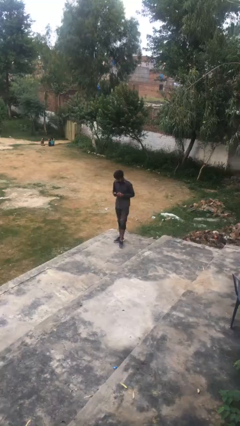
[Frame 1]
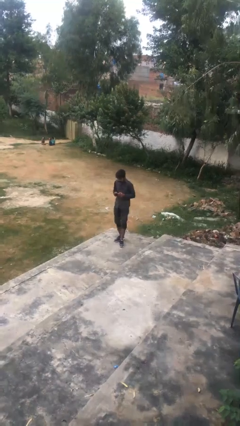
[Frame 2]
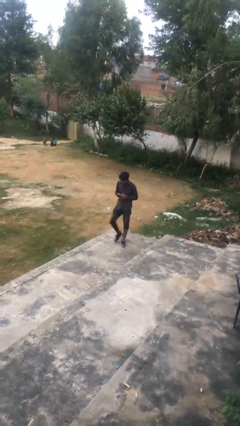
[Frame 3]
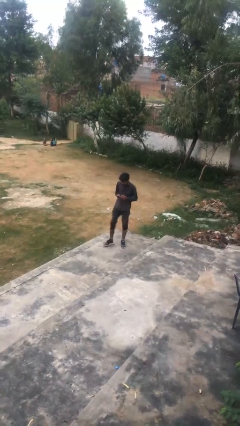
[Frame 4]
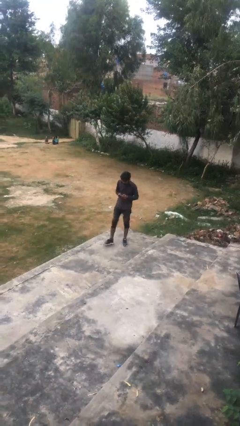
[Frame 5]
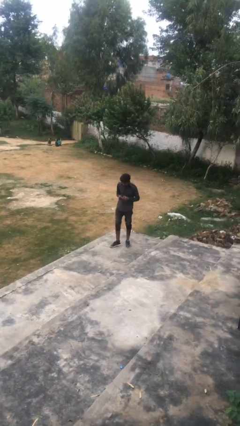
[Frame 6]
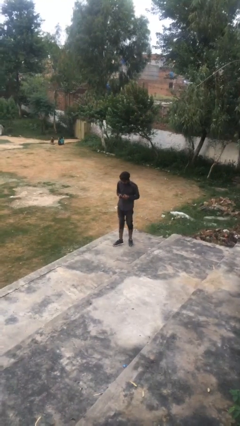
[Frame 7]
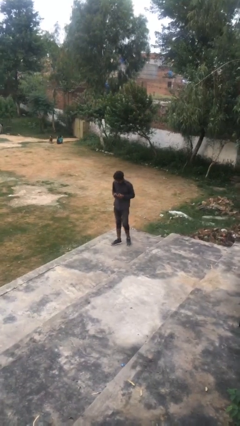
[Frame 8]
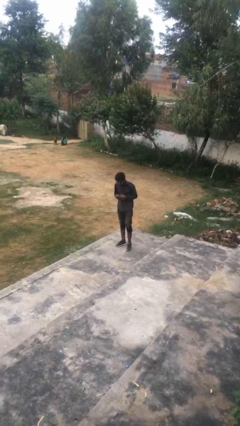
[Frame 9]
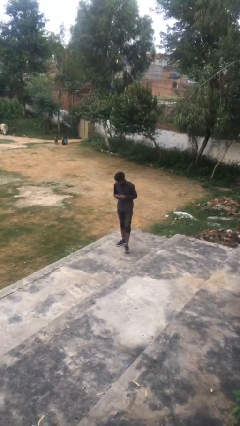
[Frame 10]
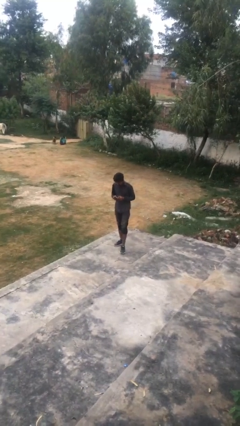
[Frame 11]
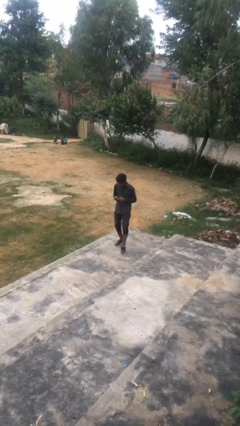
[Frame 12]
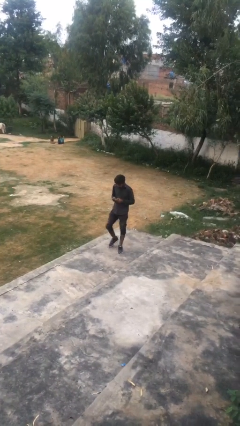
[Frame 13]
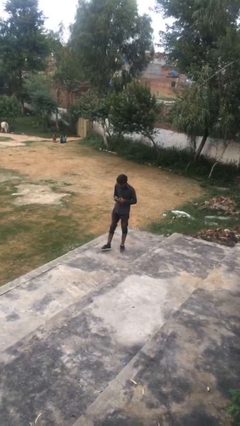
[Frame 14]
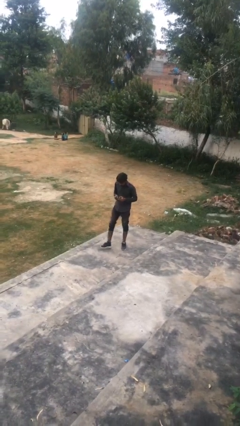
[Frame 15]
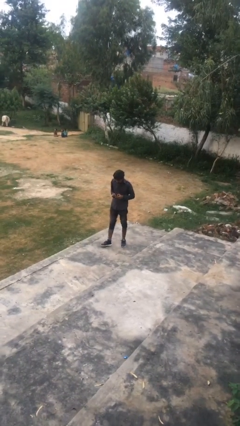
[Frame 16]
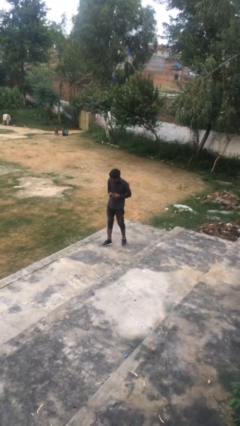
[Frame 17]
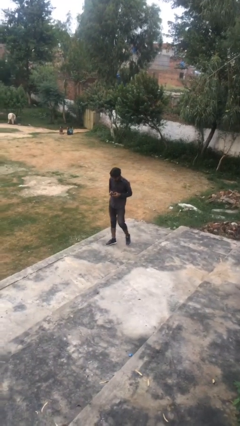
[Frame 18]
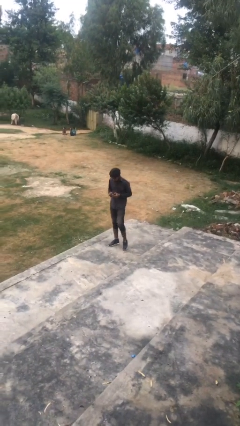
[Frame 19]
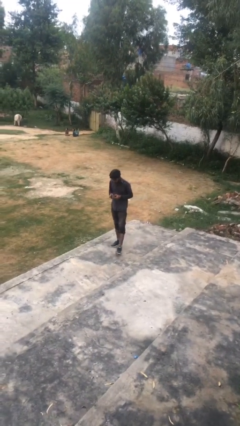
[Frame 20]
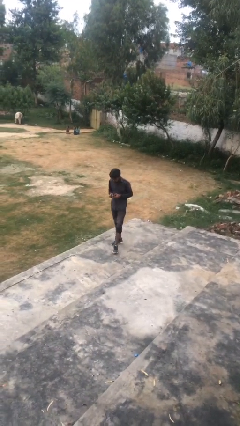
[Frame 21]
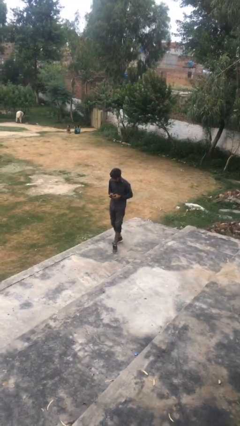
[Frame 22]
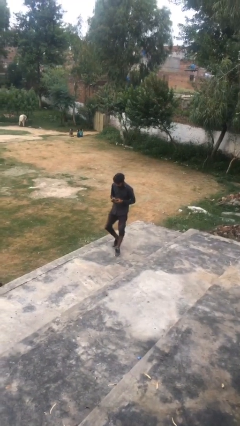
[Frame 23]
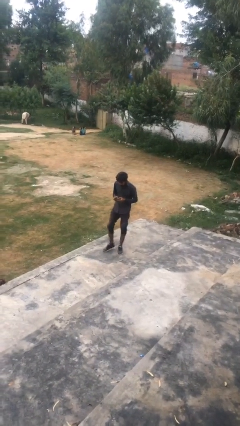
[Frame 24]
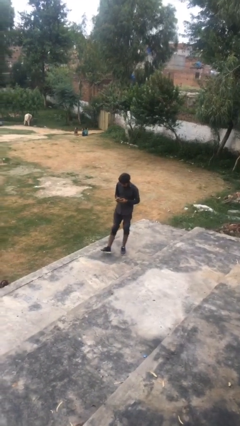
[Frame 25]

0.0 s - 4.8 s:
person texts on phone

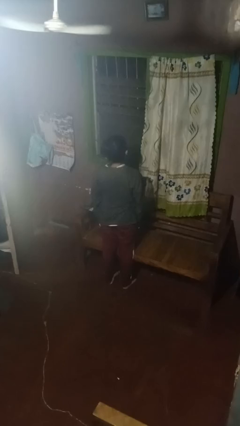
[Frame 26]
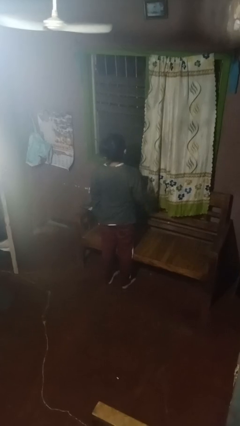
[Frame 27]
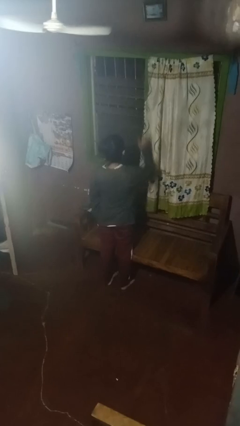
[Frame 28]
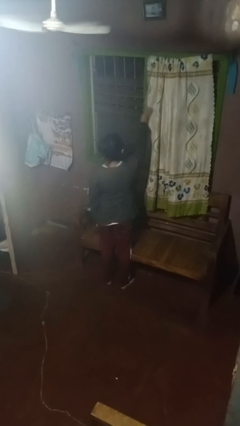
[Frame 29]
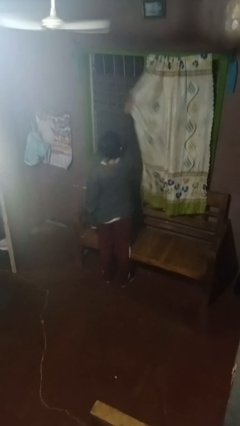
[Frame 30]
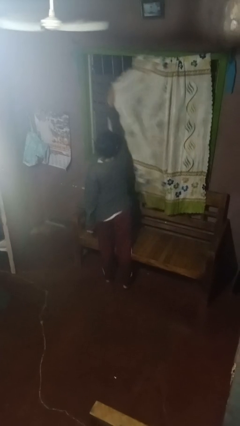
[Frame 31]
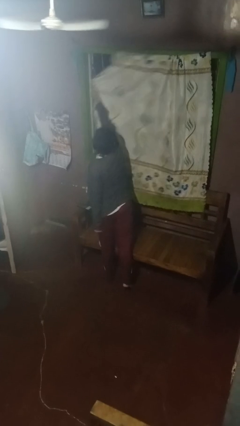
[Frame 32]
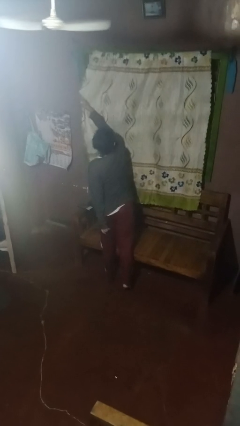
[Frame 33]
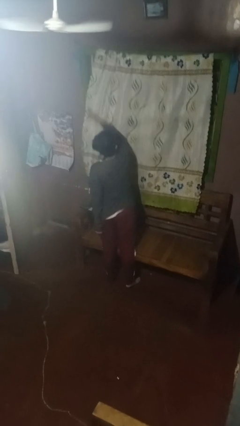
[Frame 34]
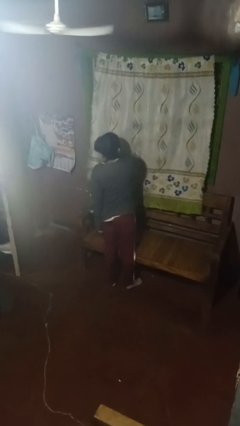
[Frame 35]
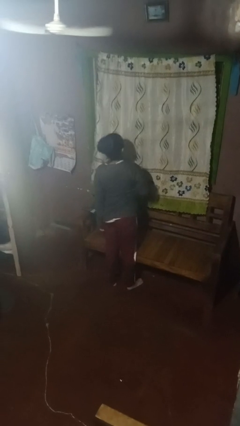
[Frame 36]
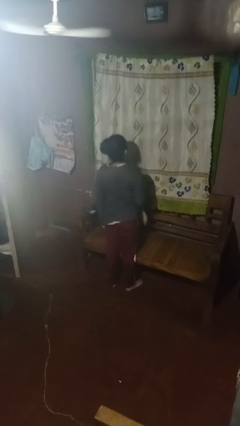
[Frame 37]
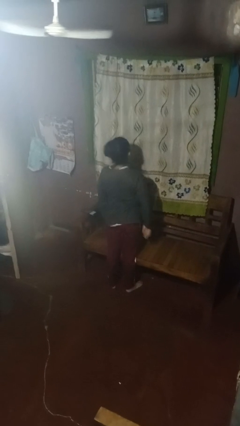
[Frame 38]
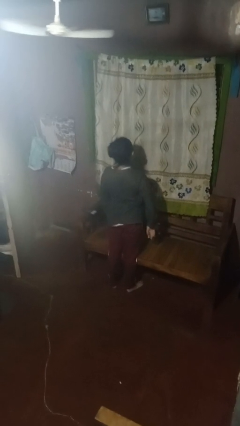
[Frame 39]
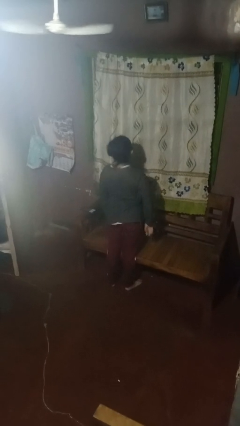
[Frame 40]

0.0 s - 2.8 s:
person closes curtains

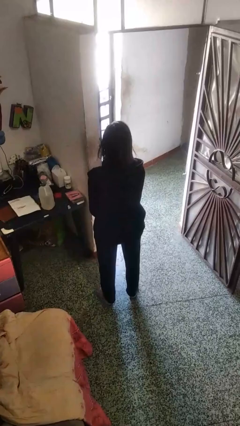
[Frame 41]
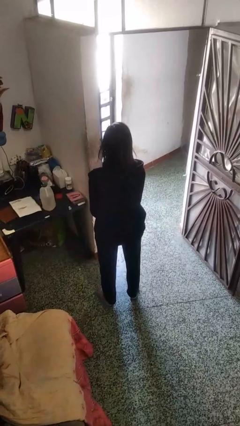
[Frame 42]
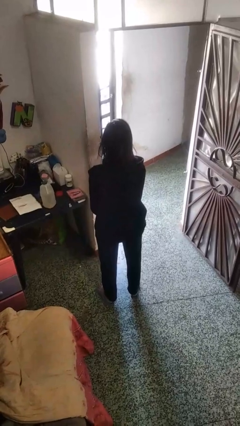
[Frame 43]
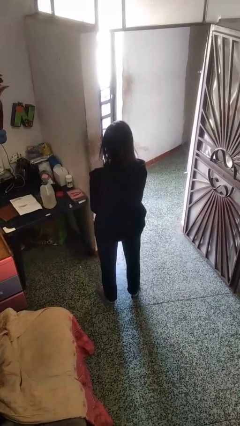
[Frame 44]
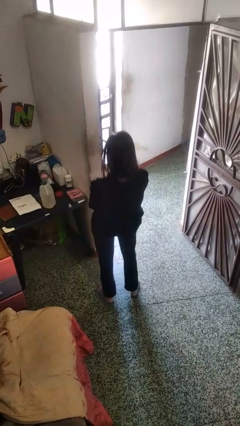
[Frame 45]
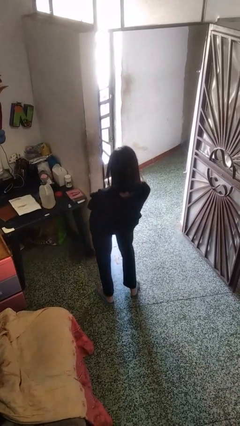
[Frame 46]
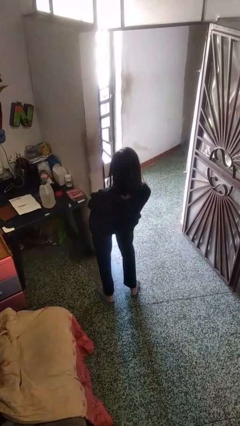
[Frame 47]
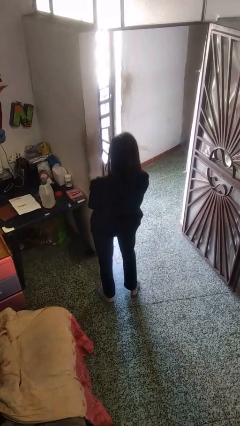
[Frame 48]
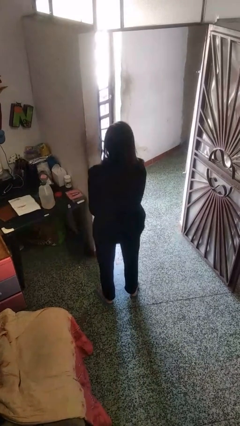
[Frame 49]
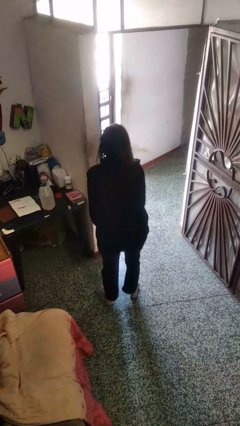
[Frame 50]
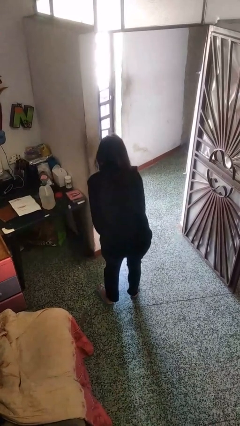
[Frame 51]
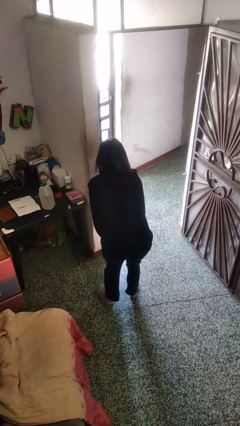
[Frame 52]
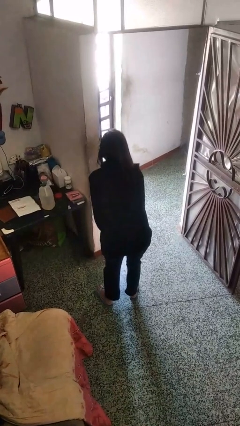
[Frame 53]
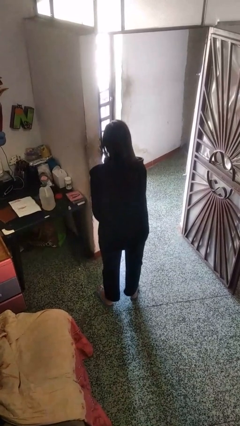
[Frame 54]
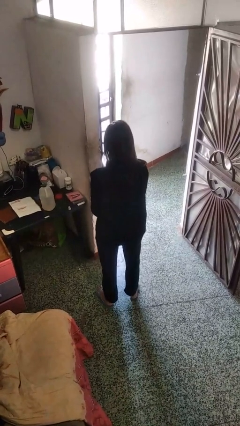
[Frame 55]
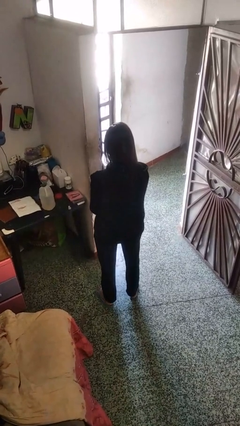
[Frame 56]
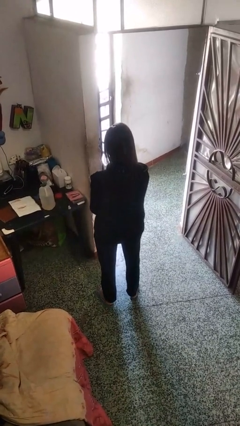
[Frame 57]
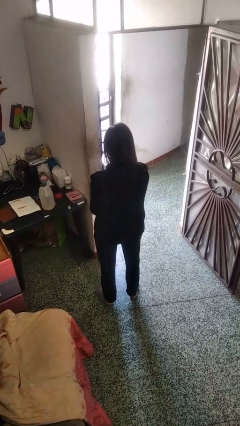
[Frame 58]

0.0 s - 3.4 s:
person wiggles hips

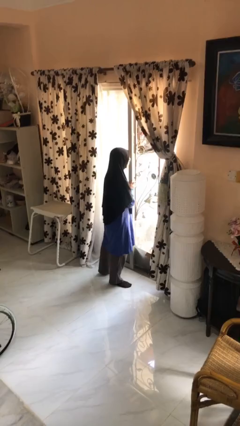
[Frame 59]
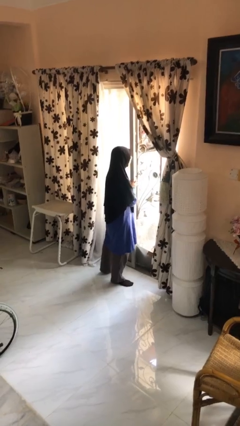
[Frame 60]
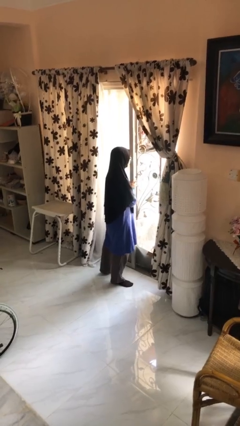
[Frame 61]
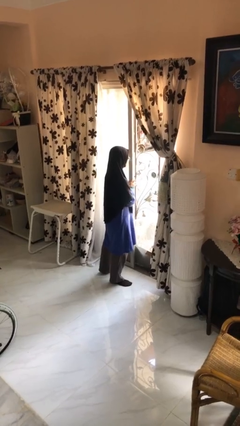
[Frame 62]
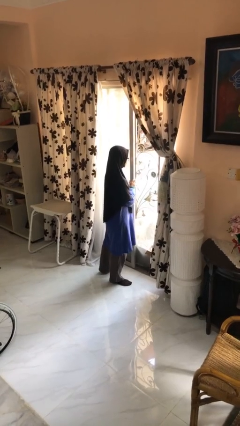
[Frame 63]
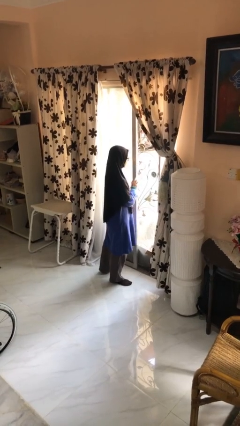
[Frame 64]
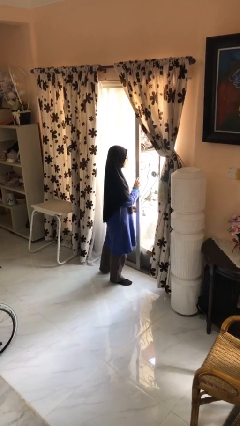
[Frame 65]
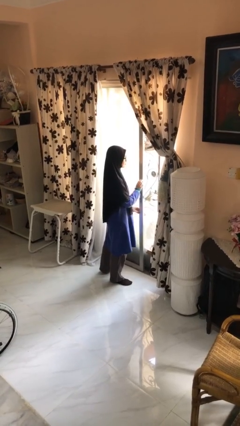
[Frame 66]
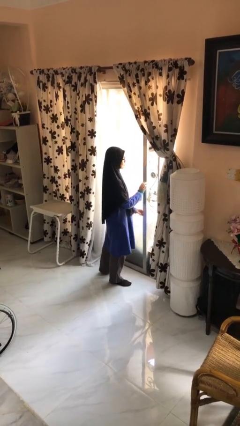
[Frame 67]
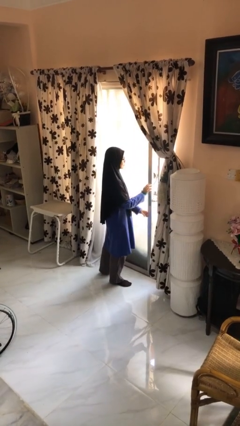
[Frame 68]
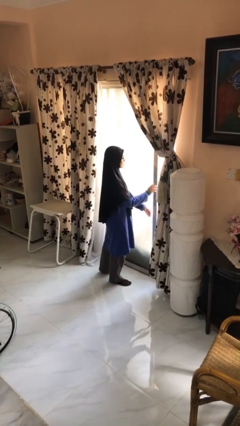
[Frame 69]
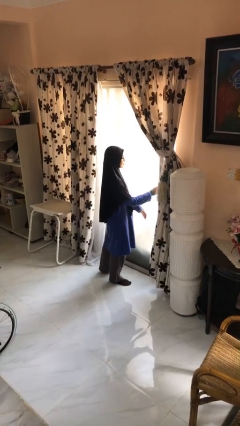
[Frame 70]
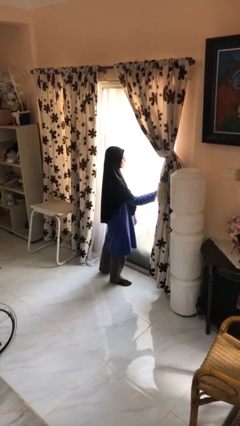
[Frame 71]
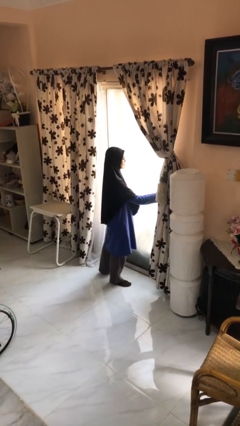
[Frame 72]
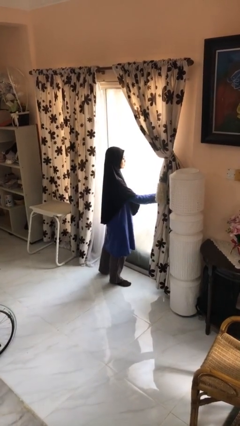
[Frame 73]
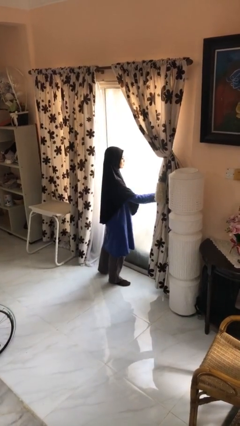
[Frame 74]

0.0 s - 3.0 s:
person closes sliding door

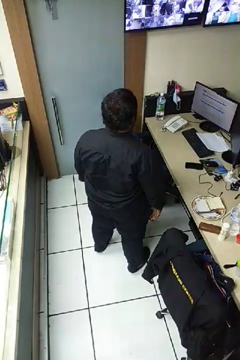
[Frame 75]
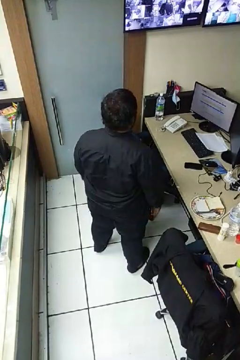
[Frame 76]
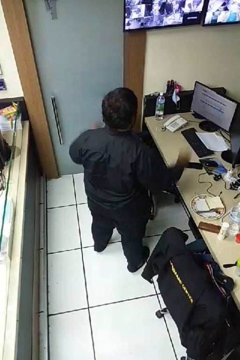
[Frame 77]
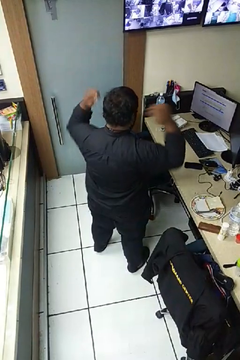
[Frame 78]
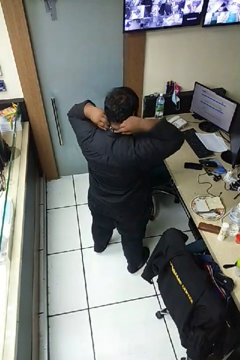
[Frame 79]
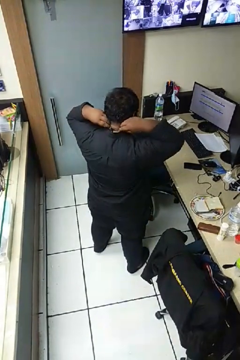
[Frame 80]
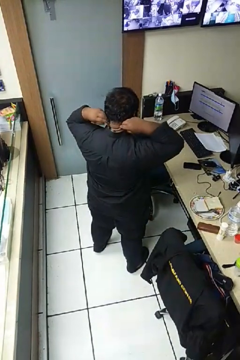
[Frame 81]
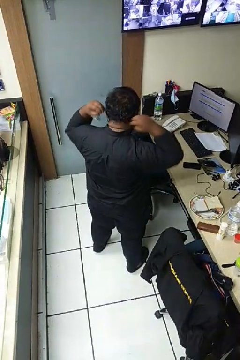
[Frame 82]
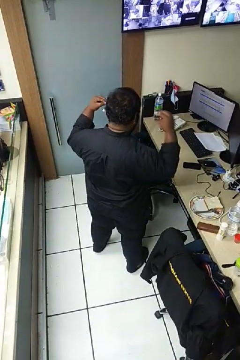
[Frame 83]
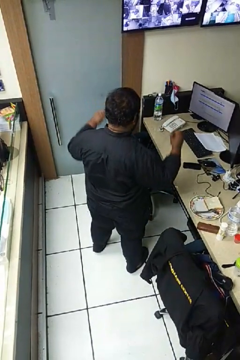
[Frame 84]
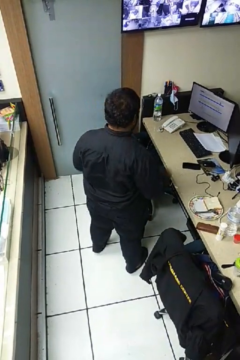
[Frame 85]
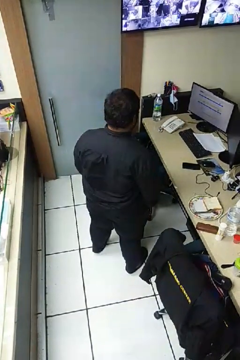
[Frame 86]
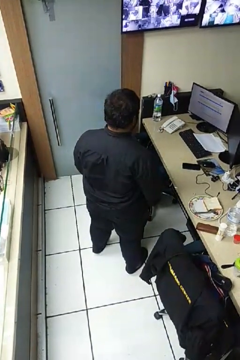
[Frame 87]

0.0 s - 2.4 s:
person takes off necklace

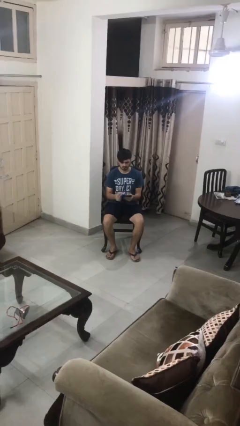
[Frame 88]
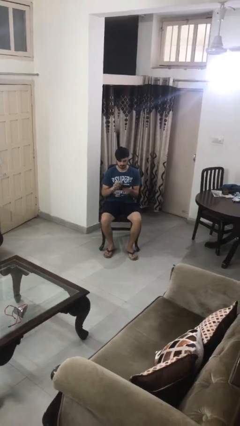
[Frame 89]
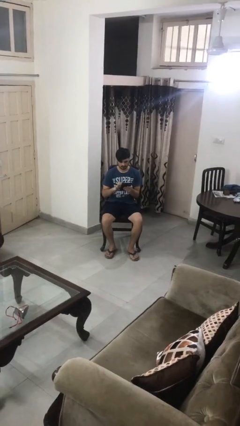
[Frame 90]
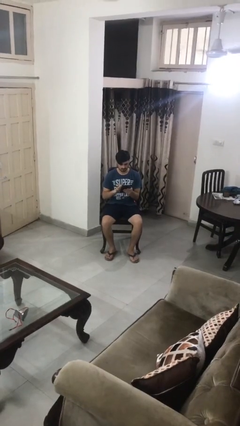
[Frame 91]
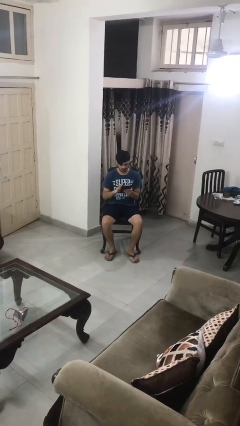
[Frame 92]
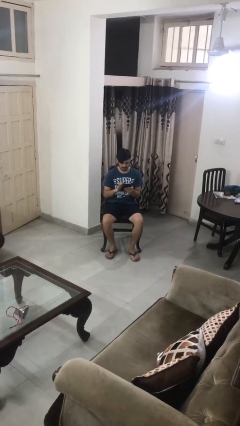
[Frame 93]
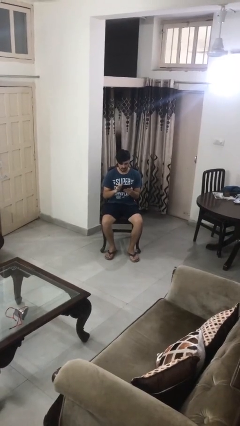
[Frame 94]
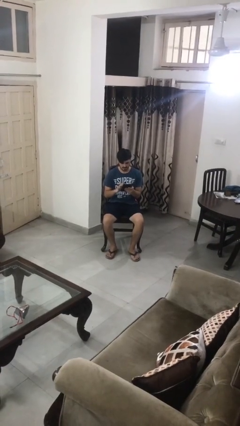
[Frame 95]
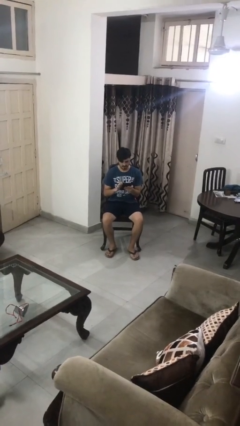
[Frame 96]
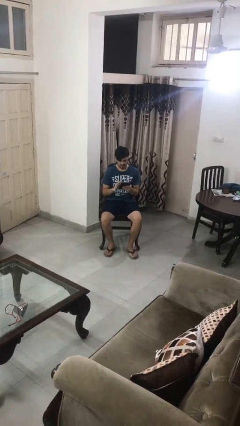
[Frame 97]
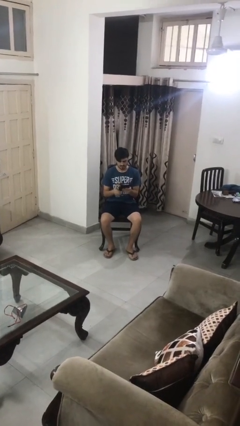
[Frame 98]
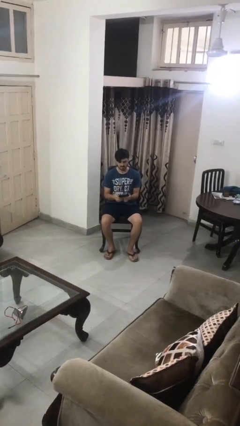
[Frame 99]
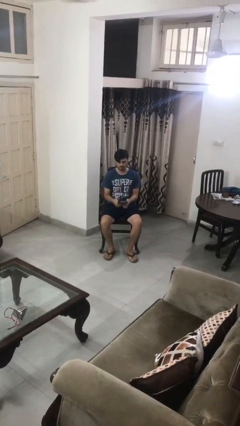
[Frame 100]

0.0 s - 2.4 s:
person interacts with tablet
